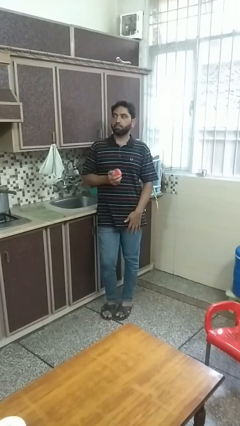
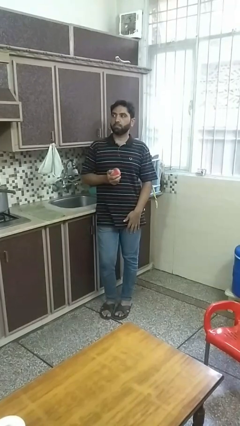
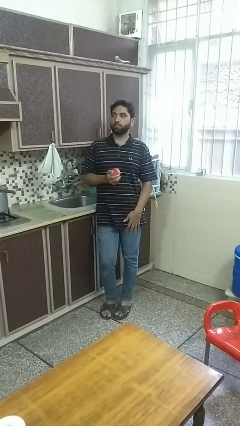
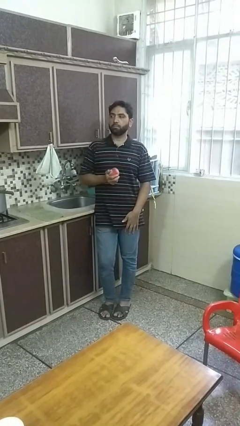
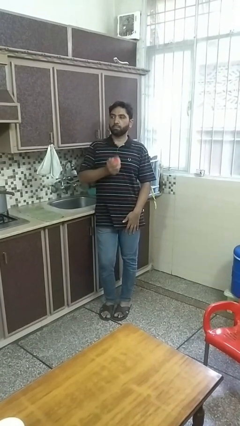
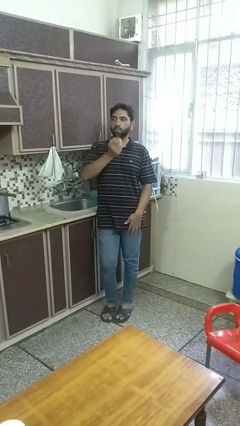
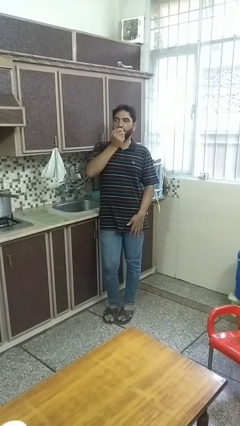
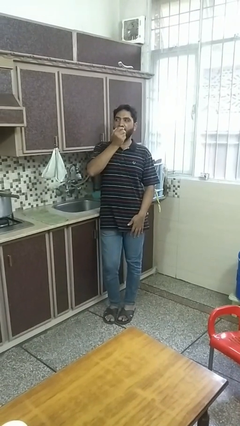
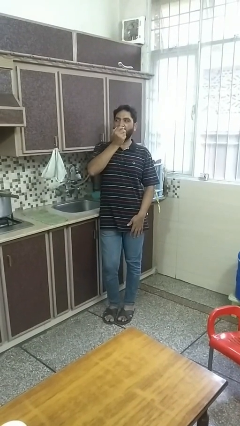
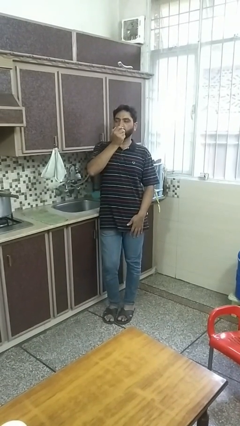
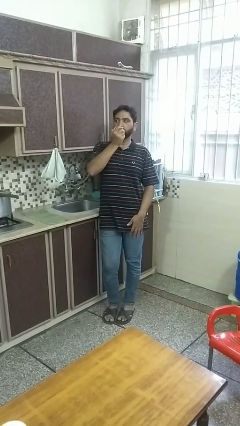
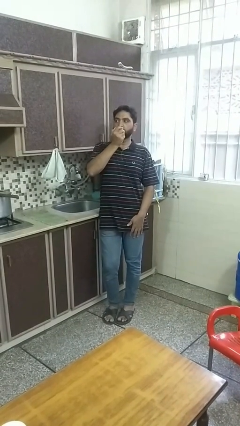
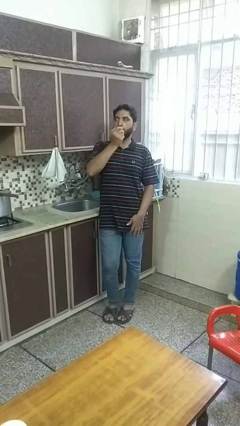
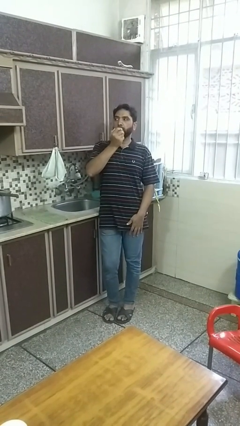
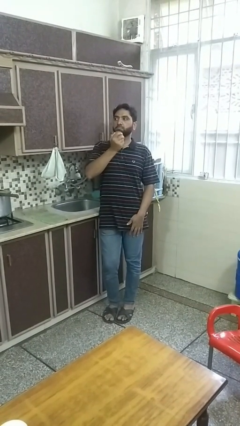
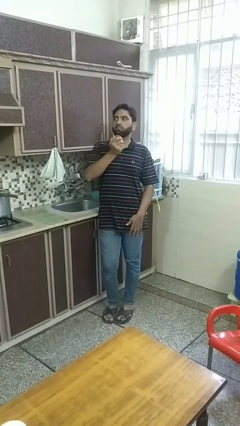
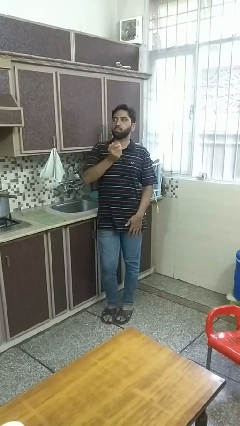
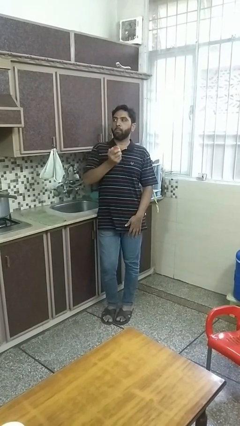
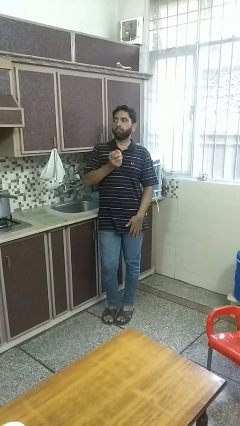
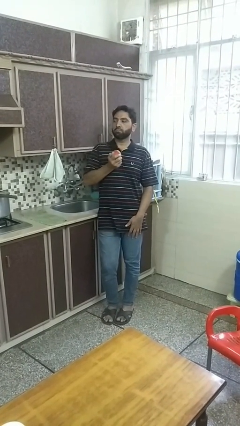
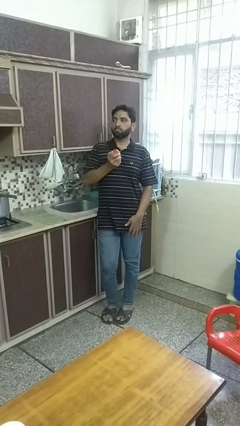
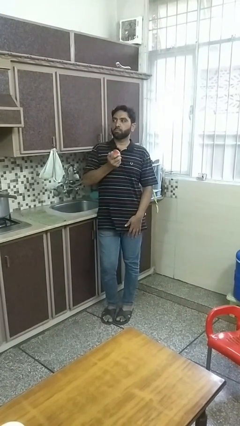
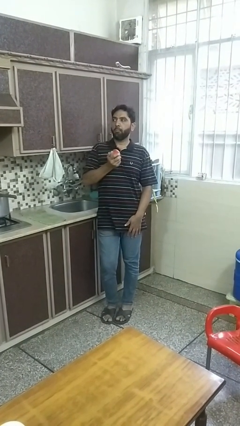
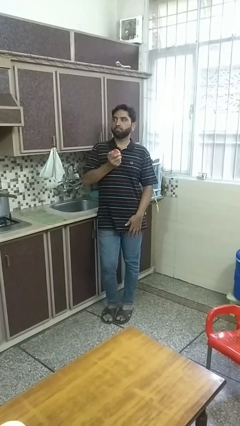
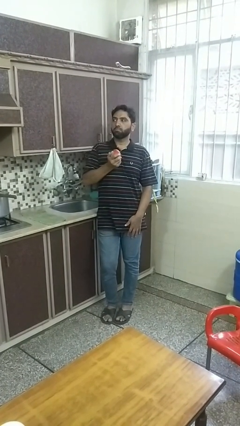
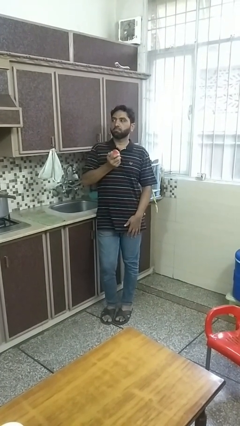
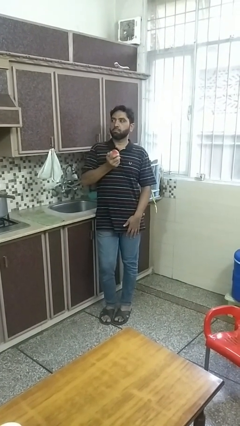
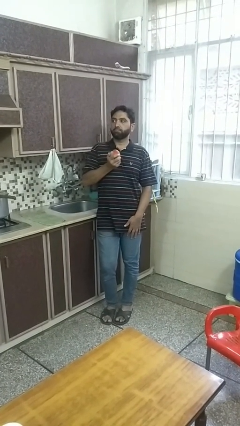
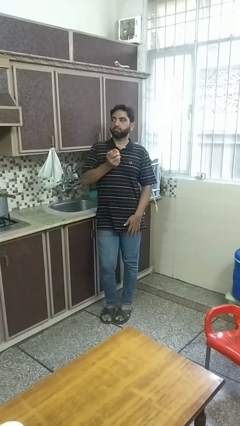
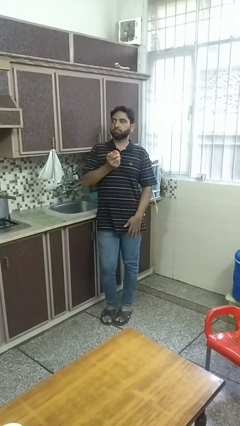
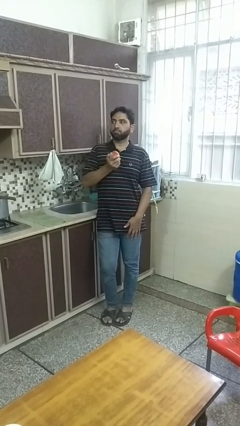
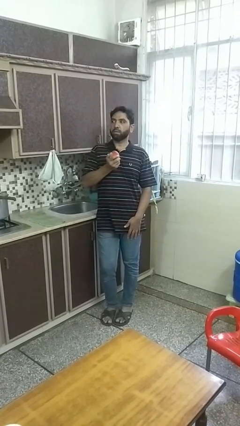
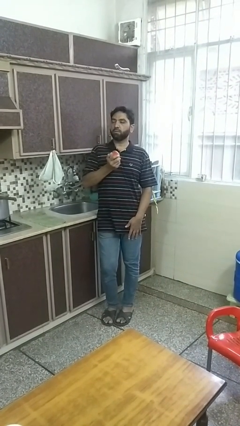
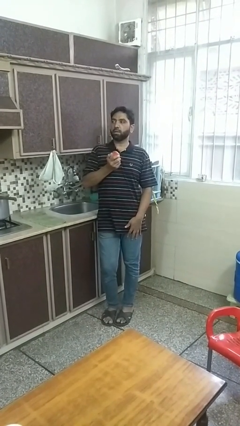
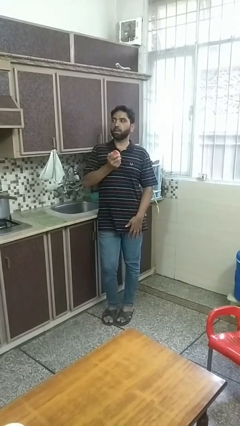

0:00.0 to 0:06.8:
person eats apple

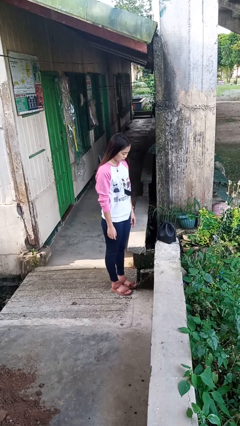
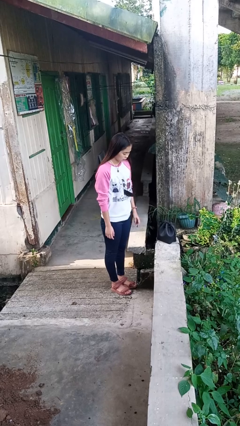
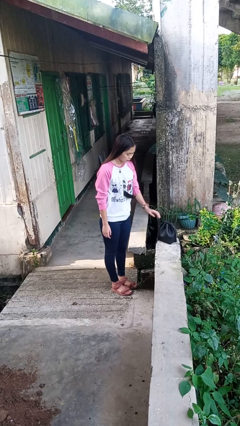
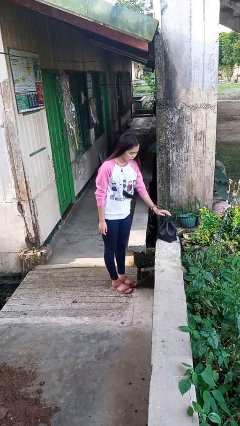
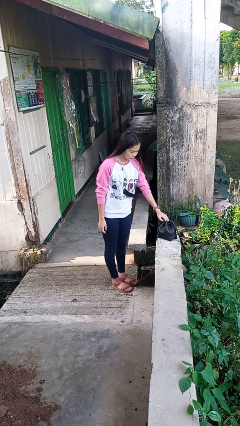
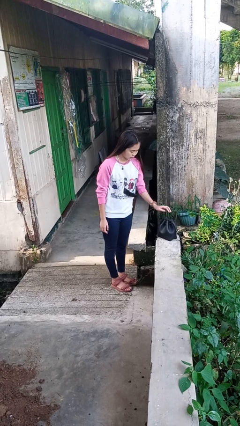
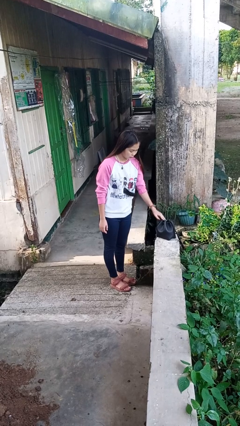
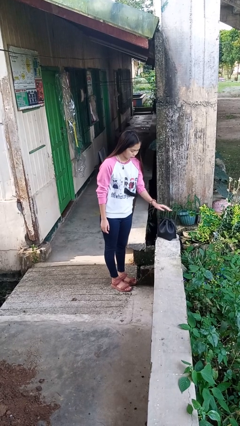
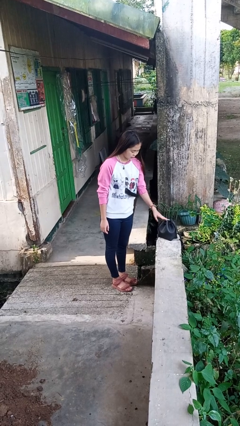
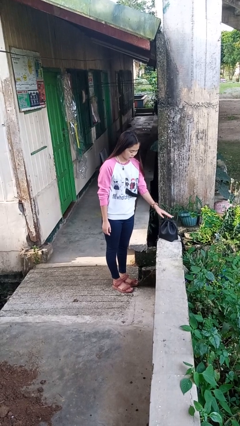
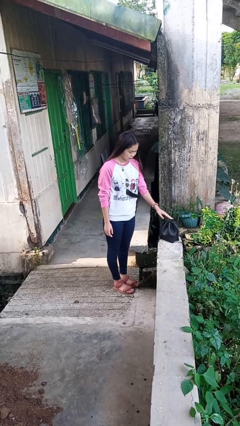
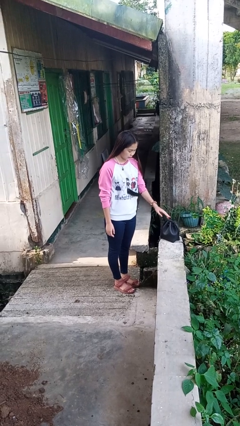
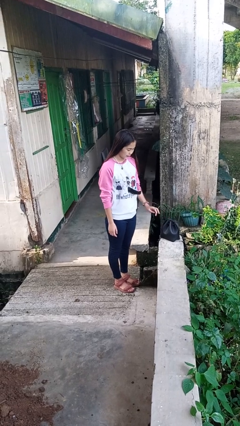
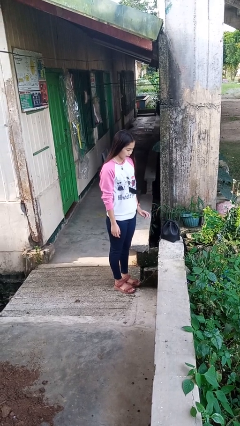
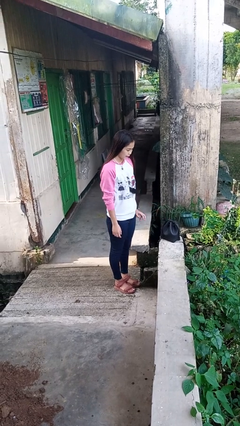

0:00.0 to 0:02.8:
person taps object with finger

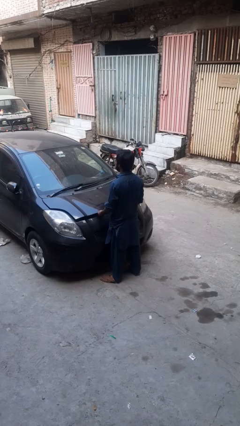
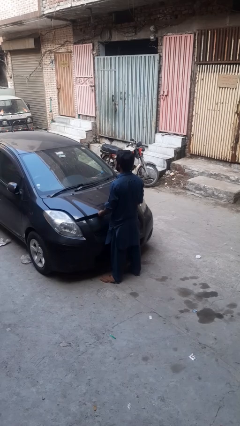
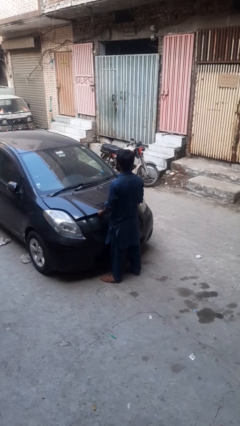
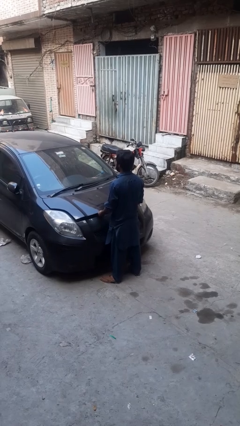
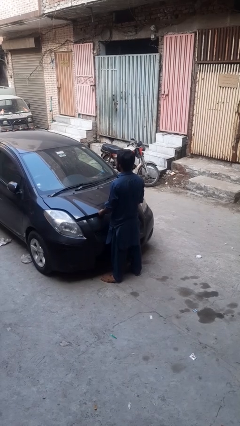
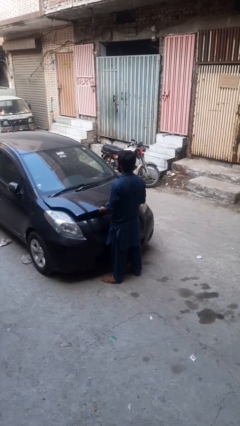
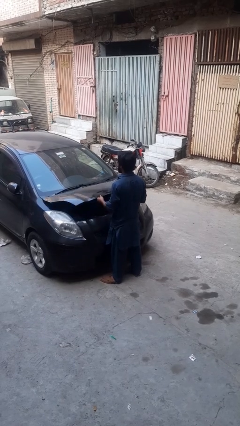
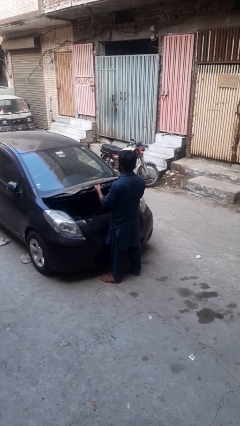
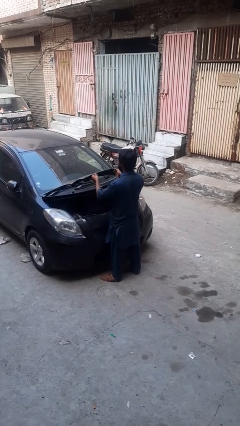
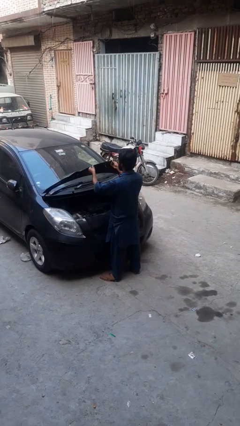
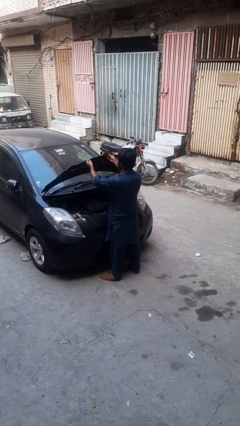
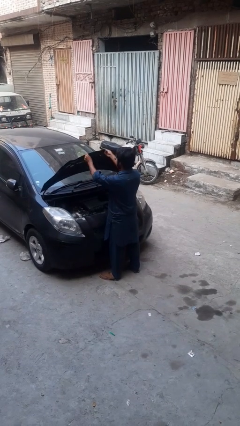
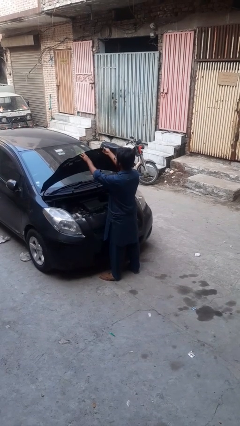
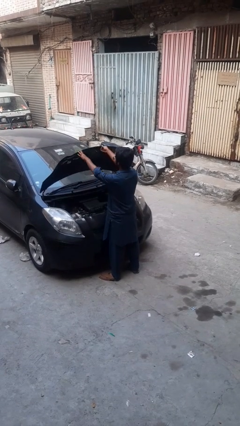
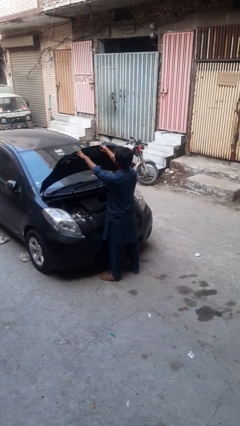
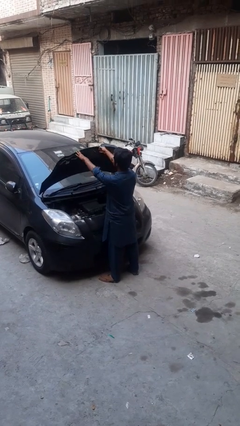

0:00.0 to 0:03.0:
person opens car hood

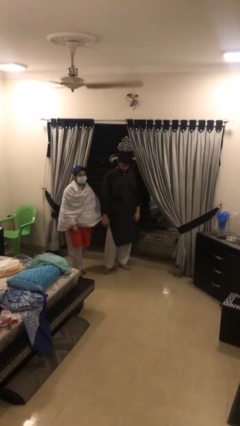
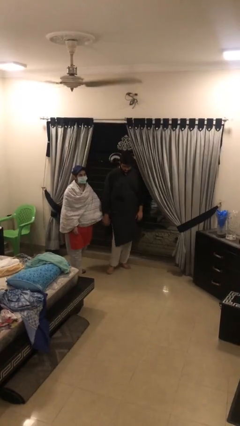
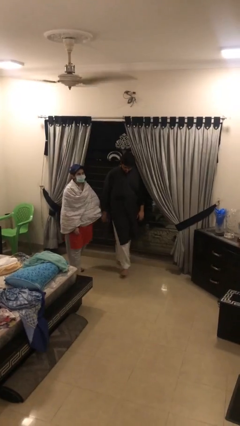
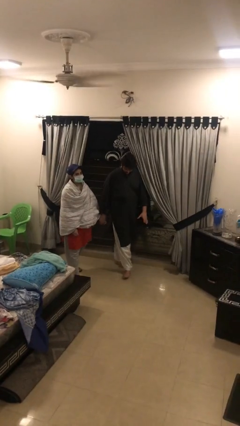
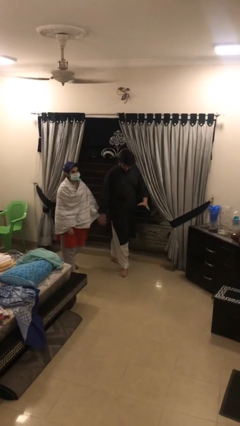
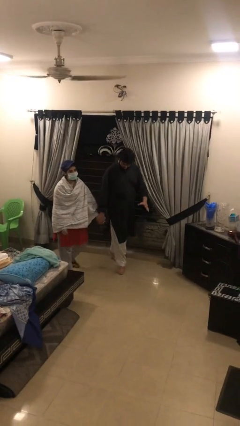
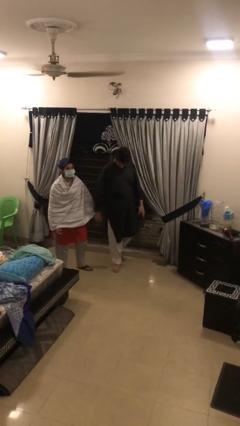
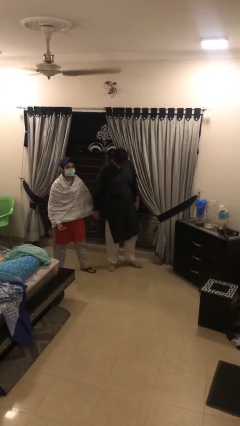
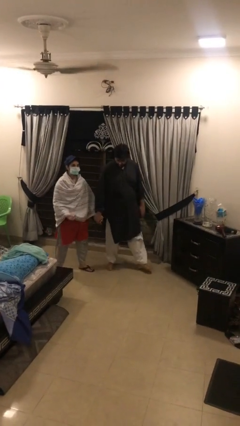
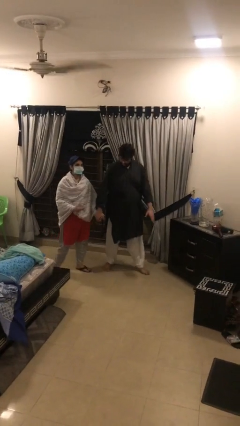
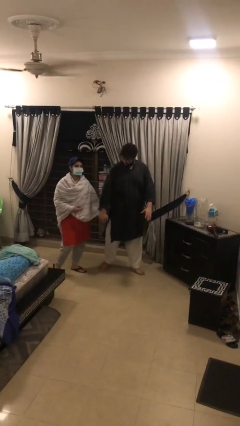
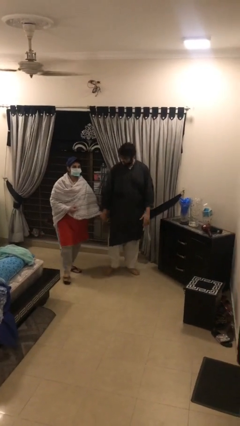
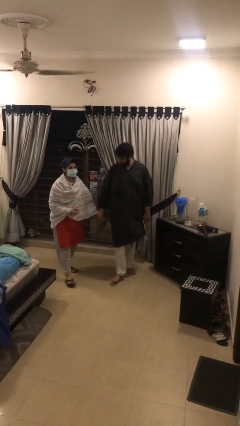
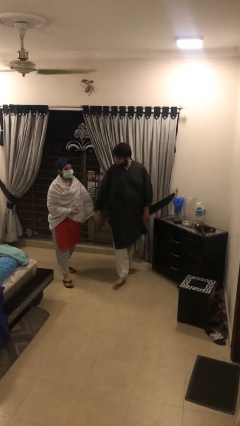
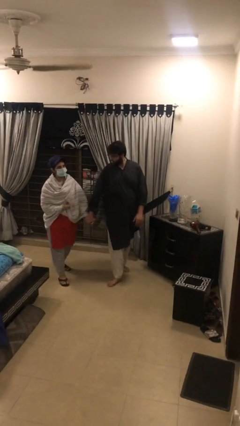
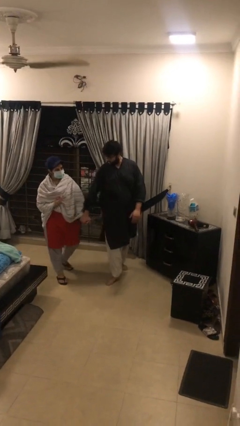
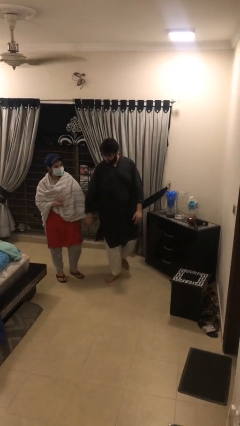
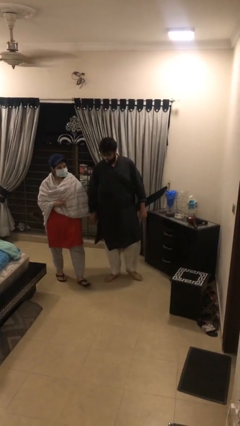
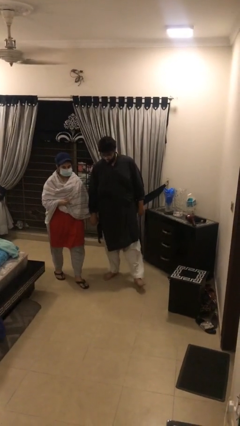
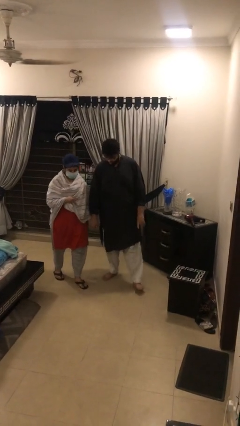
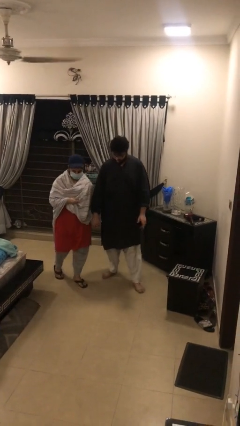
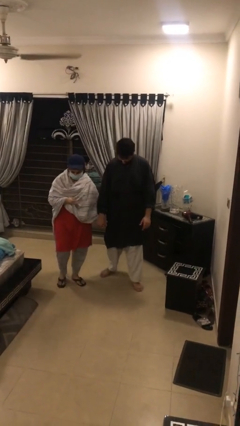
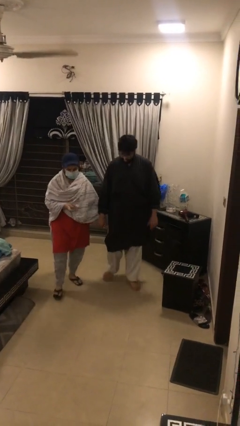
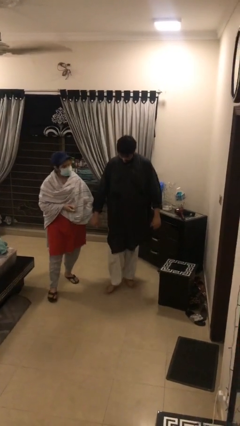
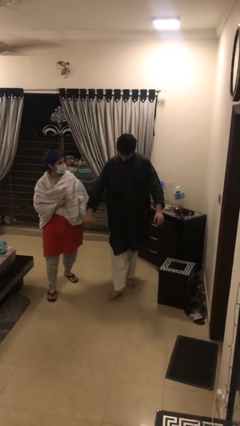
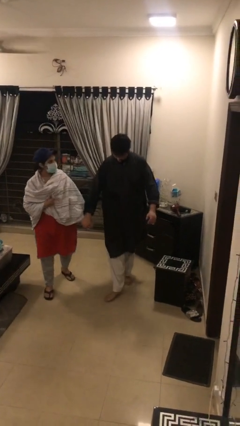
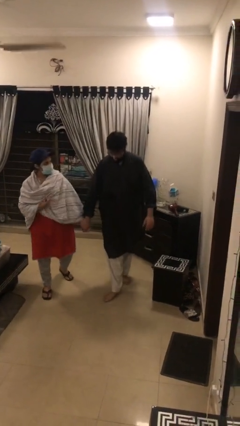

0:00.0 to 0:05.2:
person holds hand

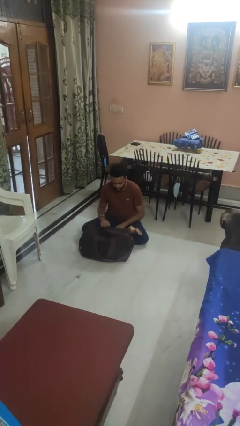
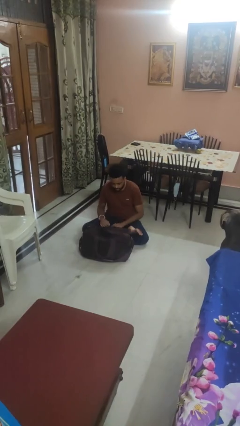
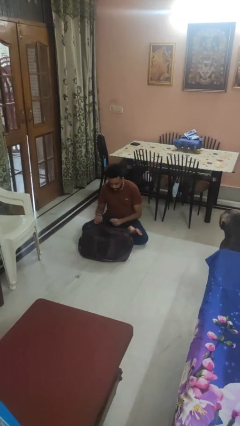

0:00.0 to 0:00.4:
person opens suitcase
